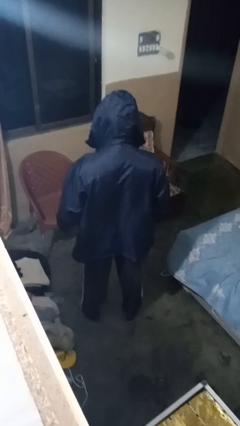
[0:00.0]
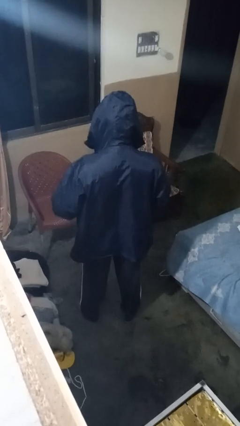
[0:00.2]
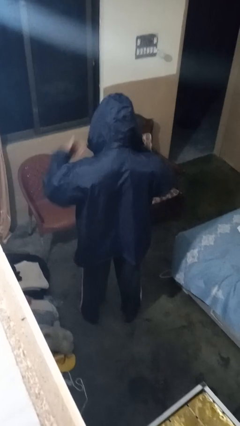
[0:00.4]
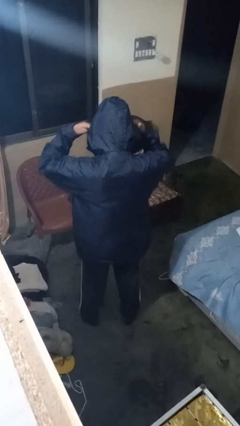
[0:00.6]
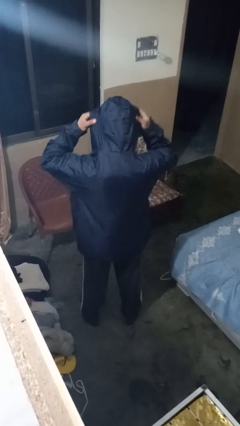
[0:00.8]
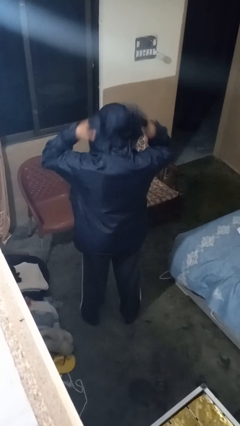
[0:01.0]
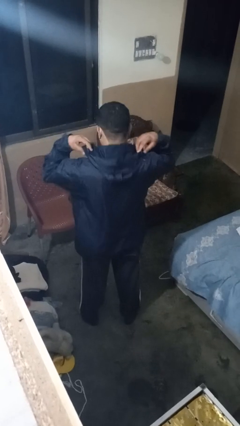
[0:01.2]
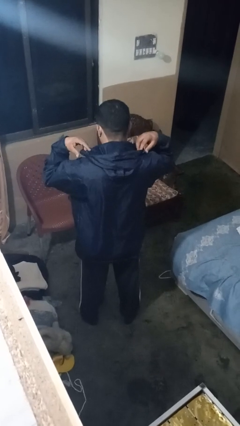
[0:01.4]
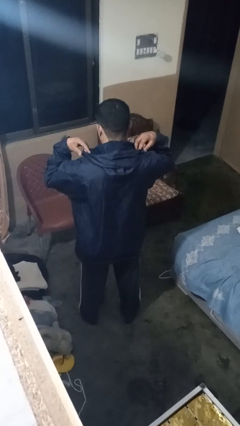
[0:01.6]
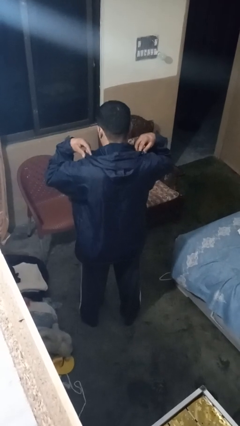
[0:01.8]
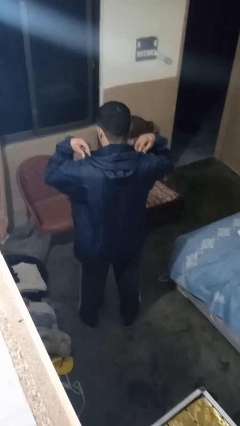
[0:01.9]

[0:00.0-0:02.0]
person takes off hoodie

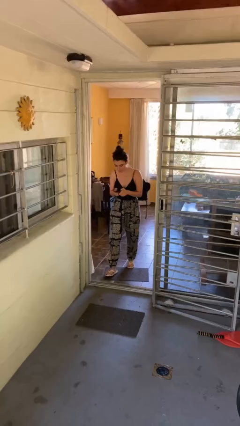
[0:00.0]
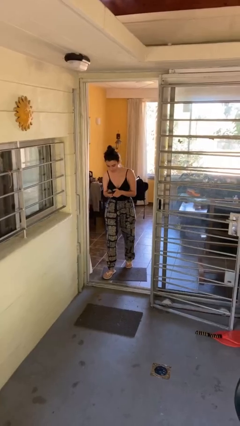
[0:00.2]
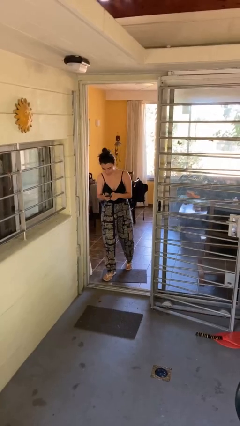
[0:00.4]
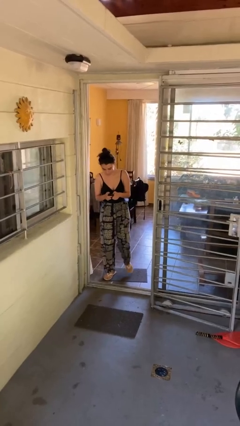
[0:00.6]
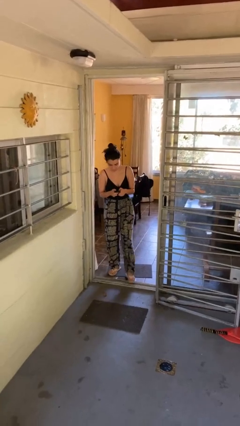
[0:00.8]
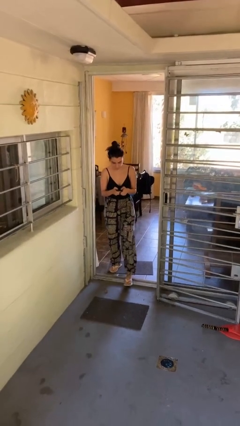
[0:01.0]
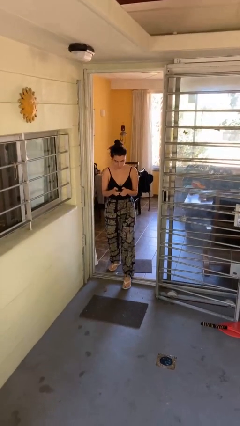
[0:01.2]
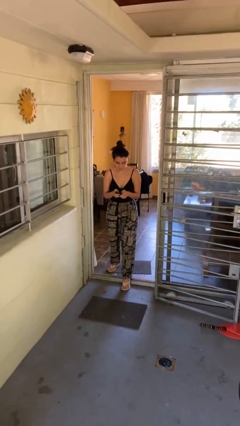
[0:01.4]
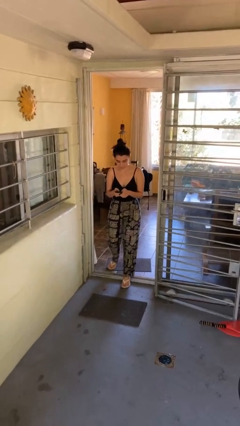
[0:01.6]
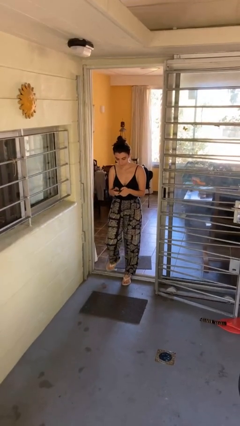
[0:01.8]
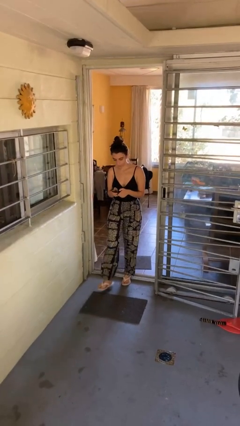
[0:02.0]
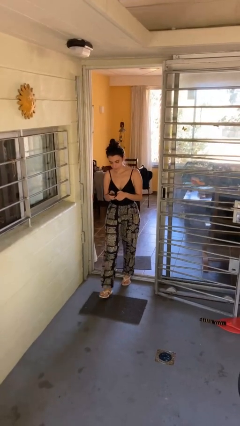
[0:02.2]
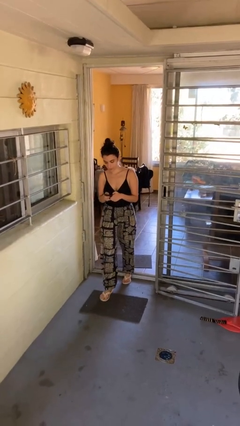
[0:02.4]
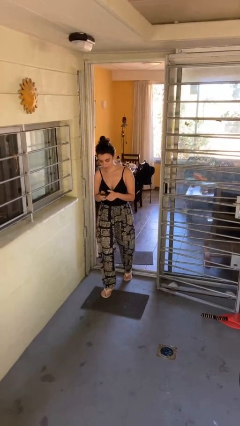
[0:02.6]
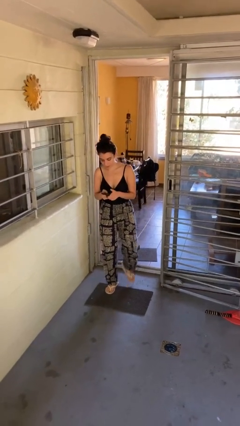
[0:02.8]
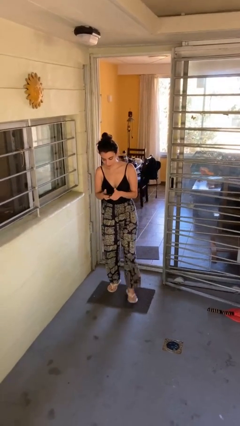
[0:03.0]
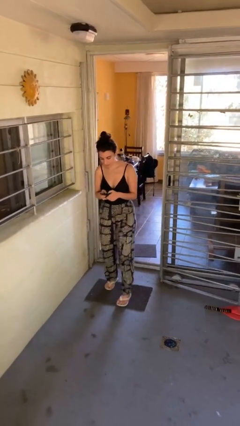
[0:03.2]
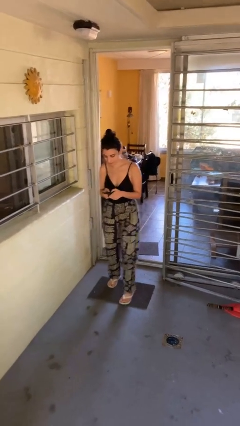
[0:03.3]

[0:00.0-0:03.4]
person enters scene through structure

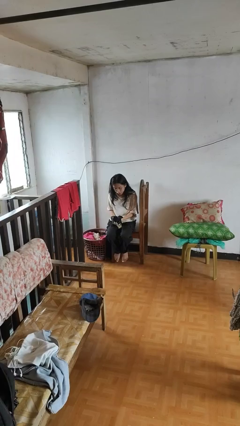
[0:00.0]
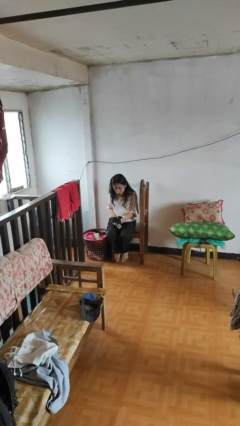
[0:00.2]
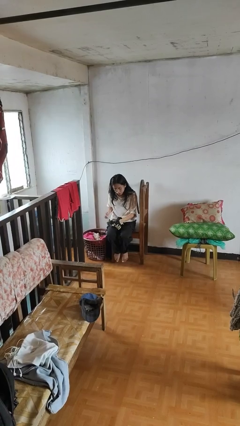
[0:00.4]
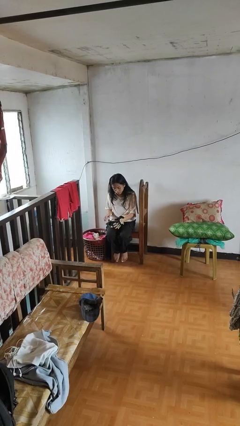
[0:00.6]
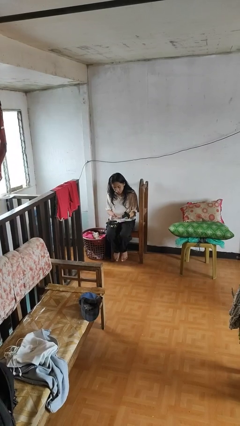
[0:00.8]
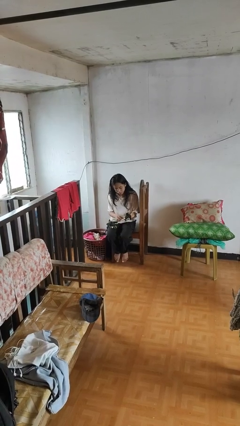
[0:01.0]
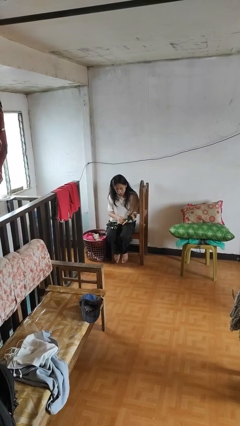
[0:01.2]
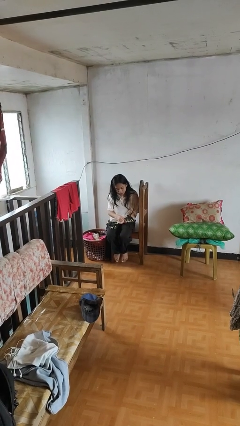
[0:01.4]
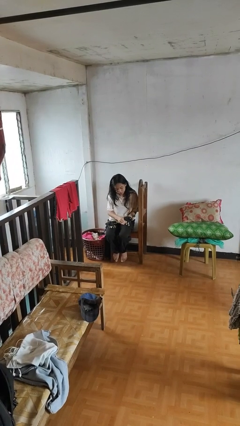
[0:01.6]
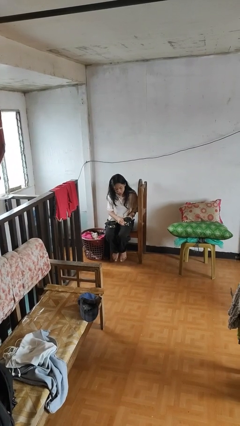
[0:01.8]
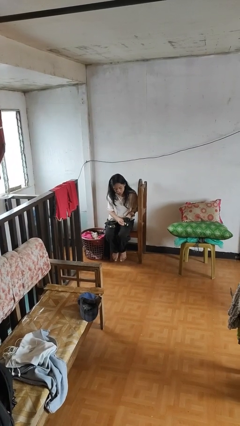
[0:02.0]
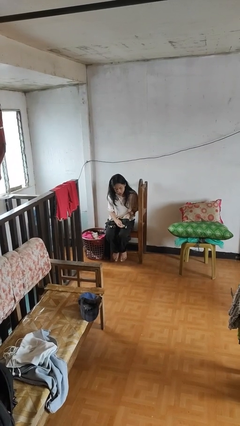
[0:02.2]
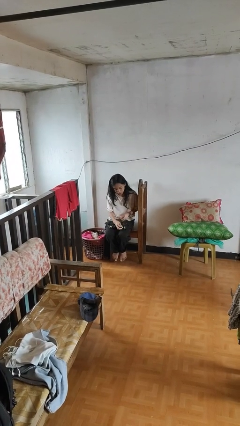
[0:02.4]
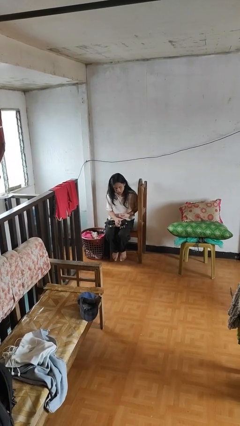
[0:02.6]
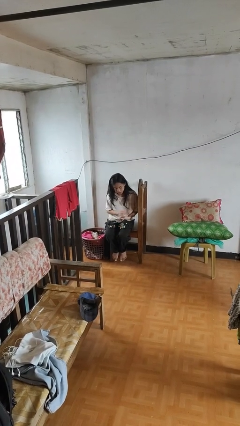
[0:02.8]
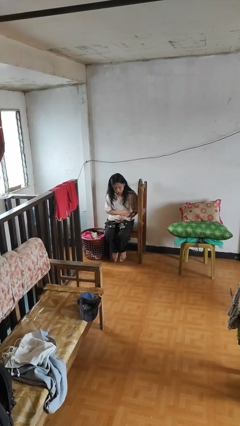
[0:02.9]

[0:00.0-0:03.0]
person takes off gloves

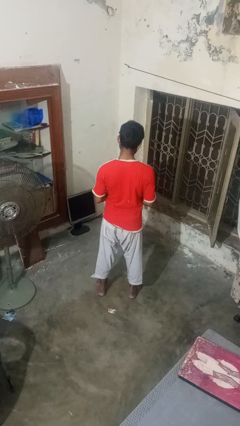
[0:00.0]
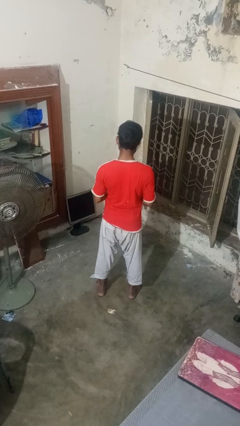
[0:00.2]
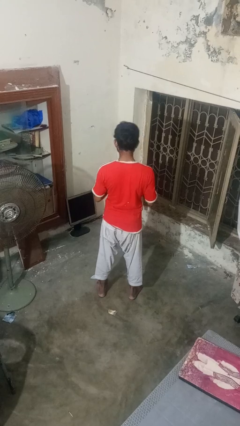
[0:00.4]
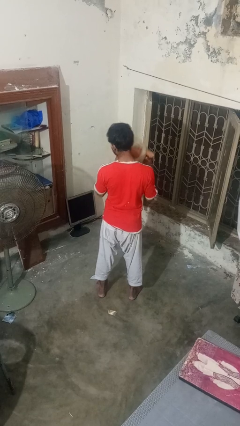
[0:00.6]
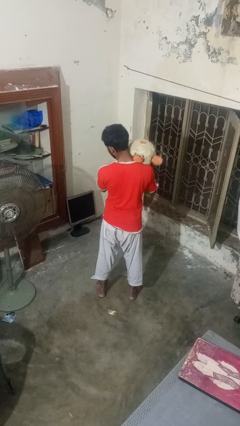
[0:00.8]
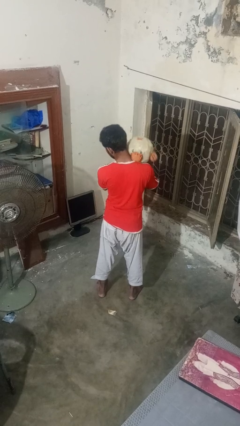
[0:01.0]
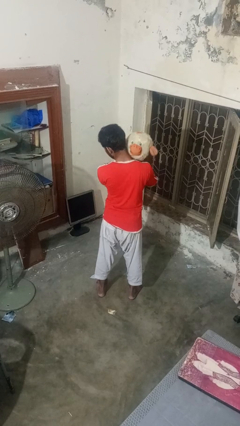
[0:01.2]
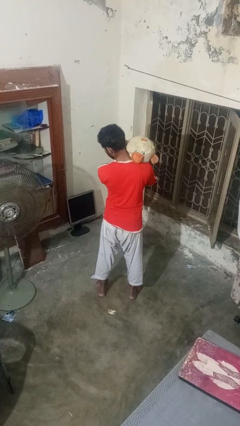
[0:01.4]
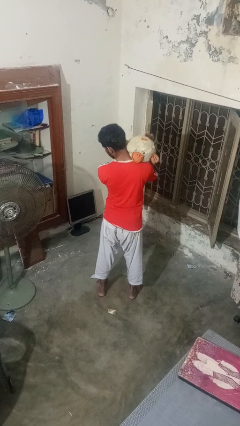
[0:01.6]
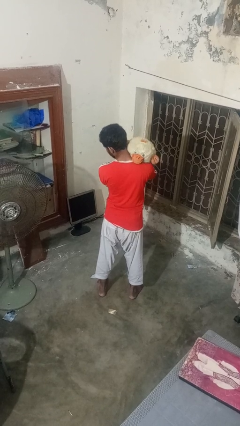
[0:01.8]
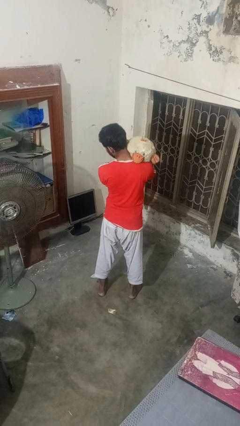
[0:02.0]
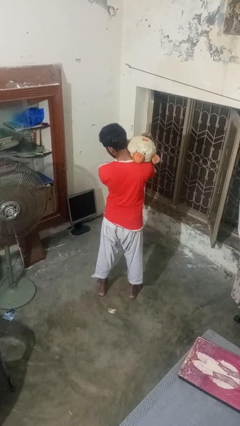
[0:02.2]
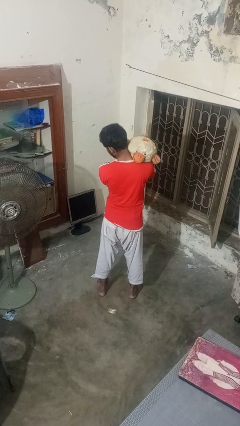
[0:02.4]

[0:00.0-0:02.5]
person hugs stuffed animal

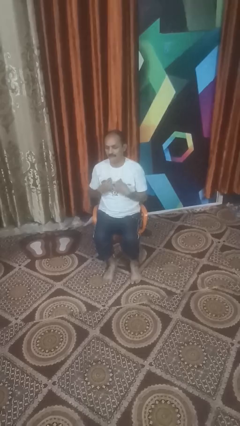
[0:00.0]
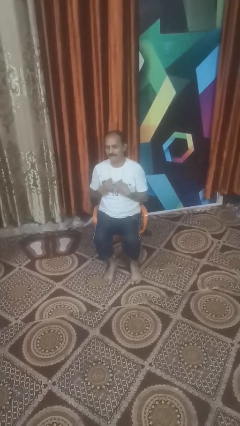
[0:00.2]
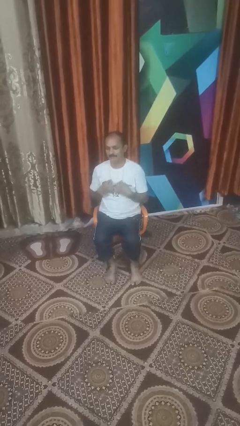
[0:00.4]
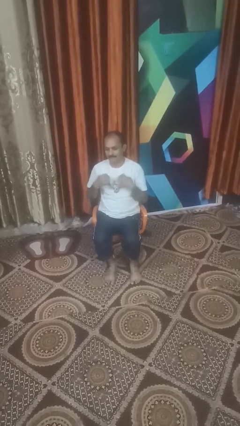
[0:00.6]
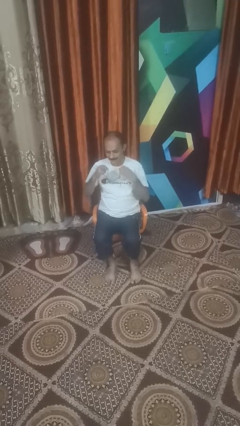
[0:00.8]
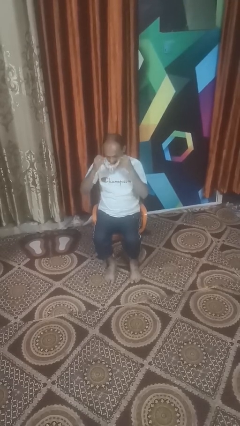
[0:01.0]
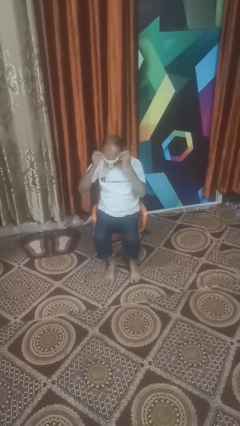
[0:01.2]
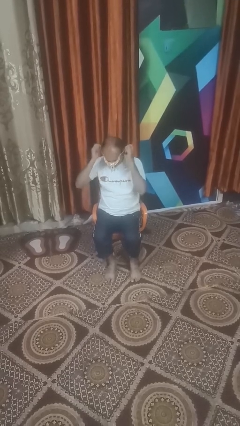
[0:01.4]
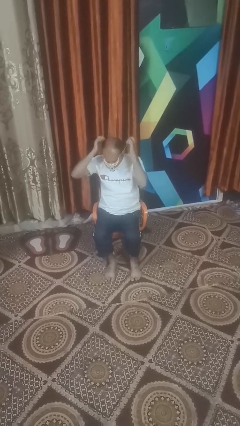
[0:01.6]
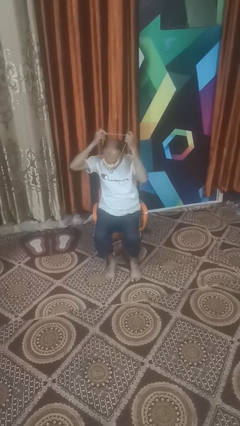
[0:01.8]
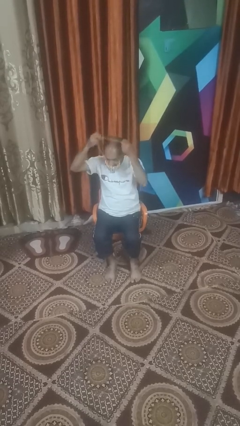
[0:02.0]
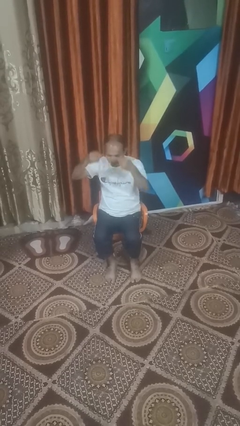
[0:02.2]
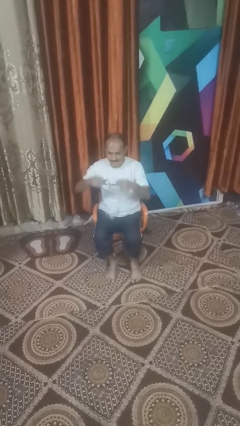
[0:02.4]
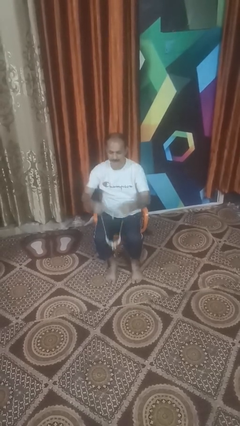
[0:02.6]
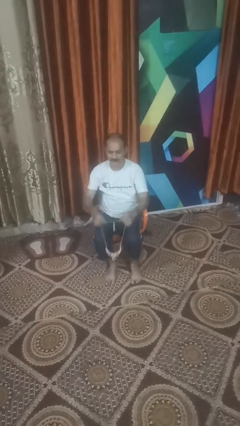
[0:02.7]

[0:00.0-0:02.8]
person takes off necklace

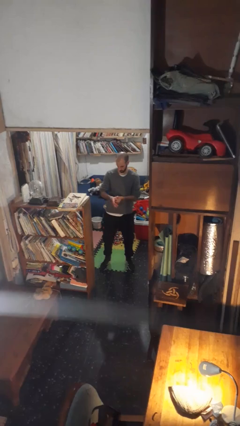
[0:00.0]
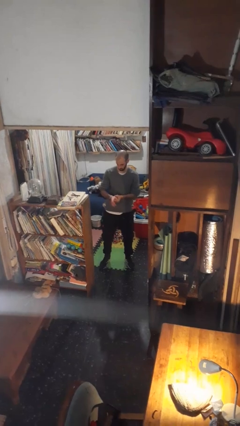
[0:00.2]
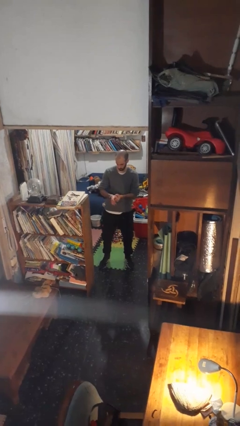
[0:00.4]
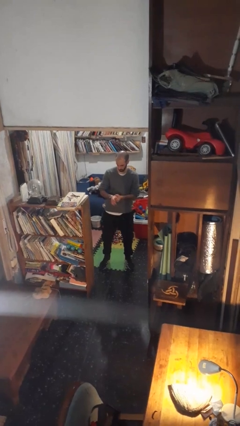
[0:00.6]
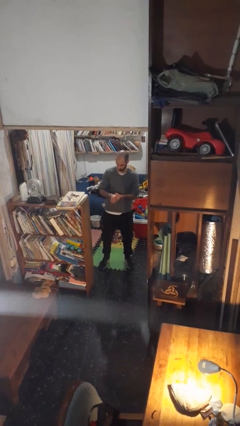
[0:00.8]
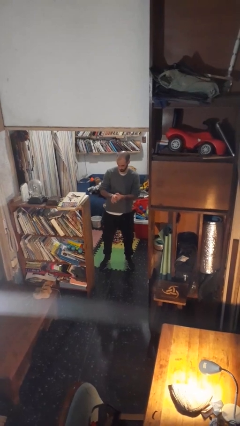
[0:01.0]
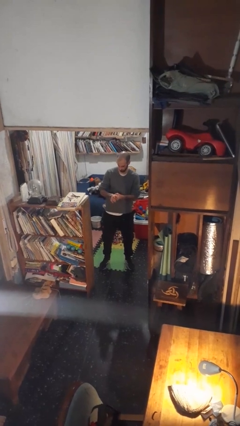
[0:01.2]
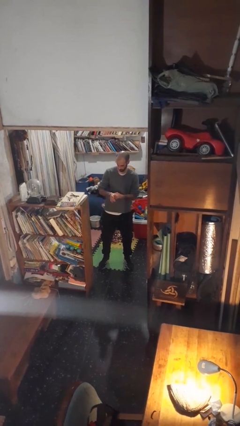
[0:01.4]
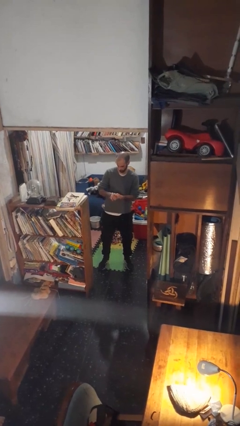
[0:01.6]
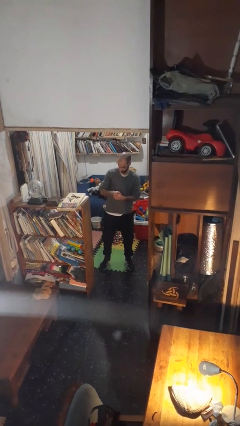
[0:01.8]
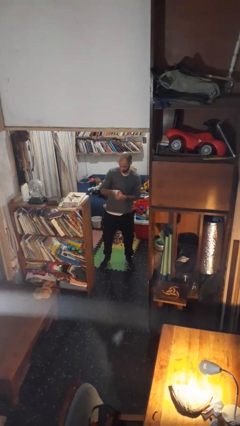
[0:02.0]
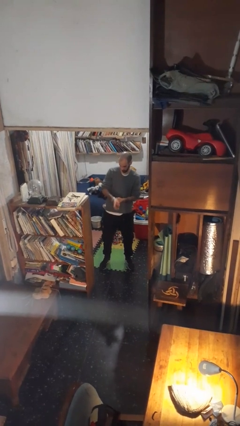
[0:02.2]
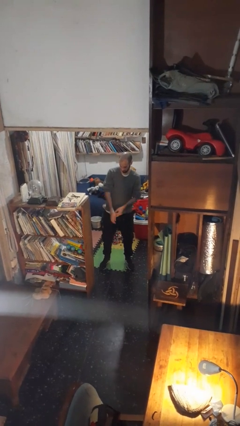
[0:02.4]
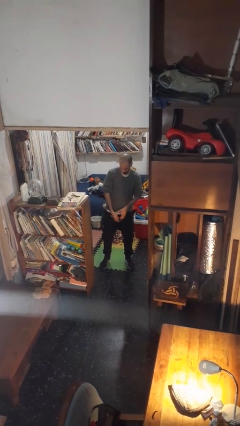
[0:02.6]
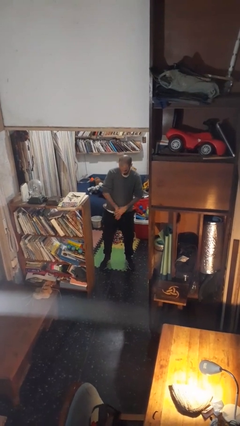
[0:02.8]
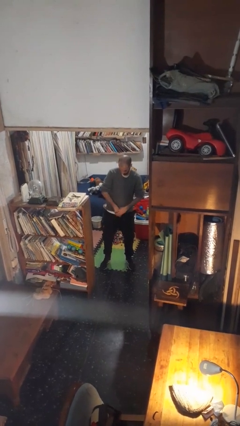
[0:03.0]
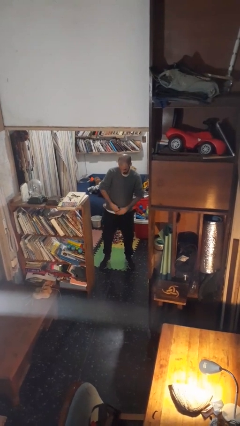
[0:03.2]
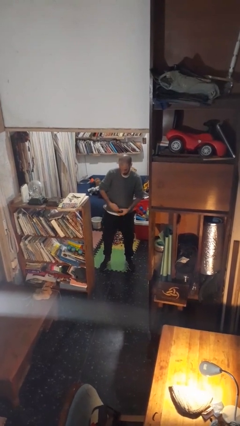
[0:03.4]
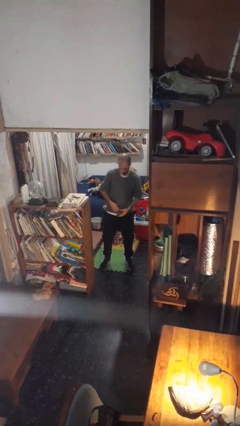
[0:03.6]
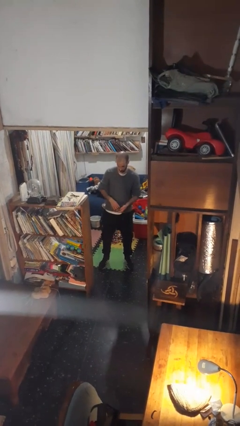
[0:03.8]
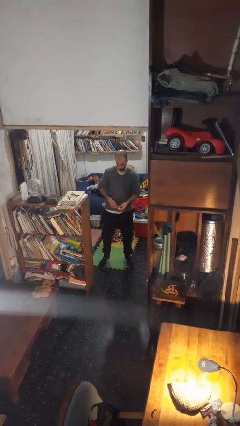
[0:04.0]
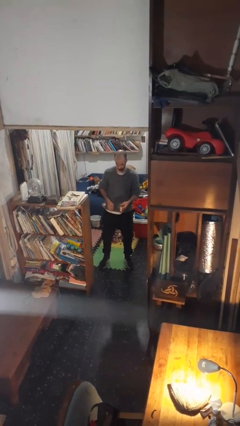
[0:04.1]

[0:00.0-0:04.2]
person takes off wristwatch
